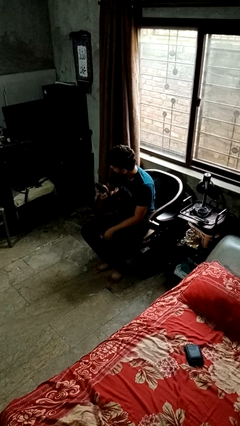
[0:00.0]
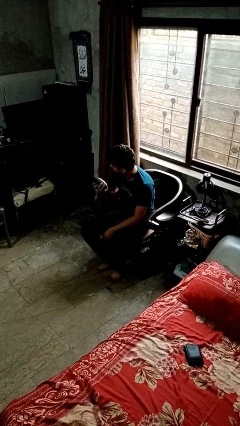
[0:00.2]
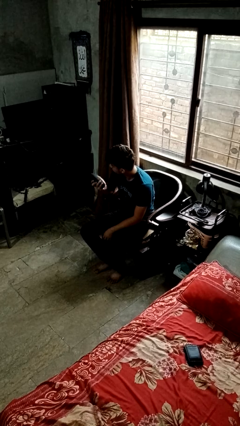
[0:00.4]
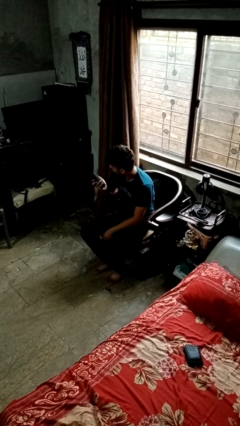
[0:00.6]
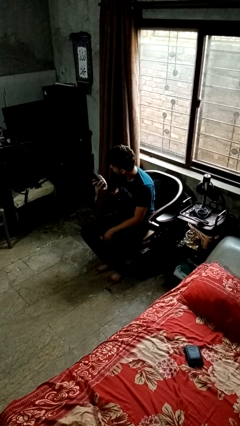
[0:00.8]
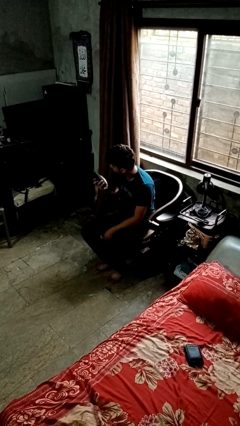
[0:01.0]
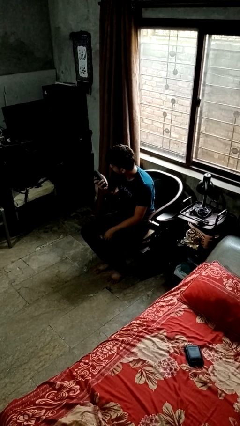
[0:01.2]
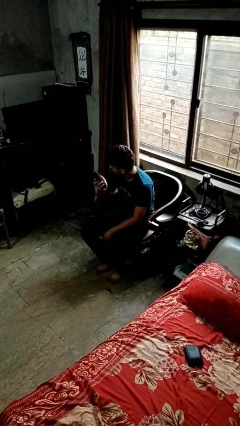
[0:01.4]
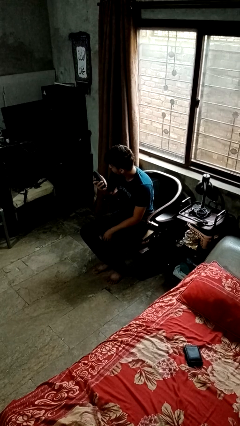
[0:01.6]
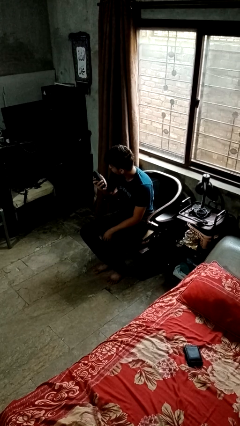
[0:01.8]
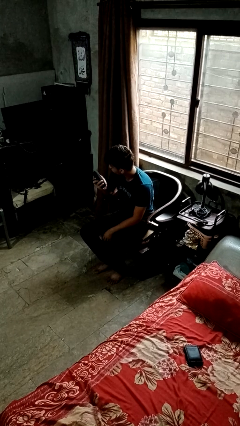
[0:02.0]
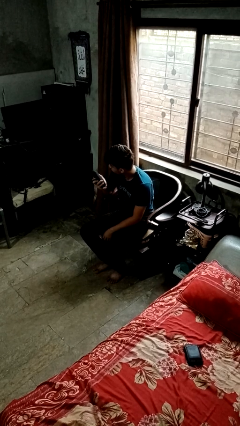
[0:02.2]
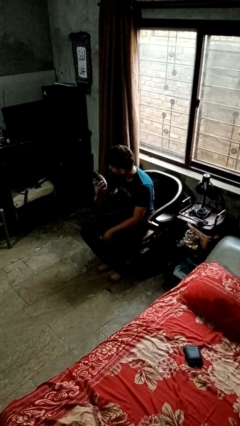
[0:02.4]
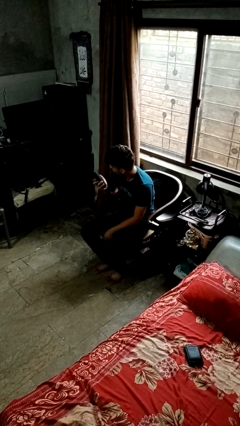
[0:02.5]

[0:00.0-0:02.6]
person uses television remote

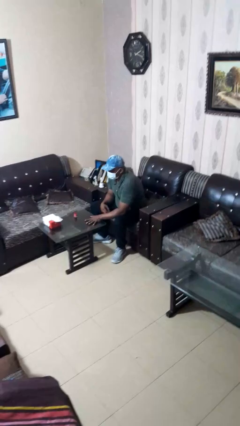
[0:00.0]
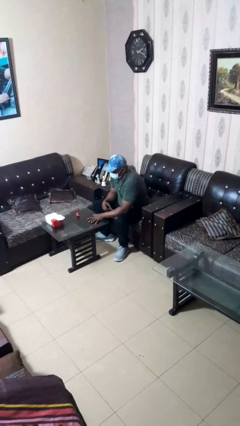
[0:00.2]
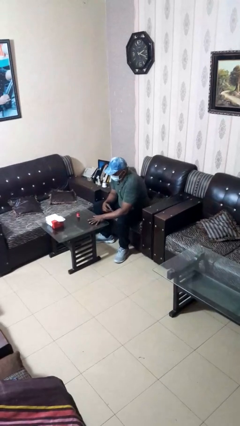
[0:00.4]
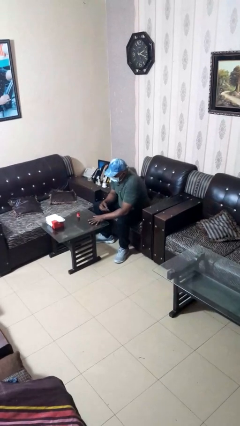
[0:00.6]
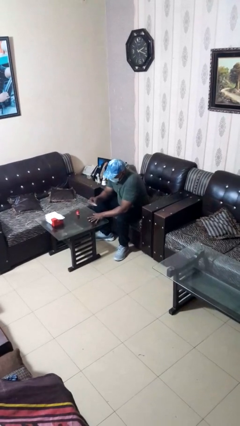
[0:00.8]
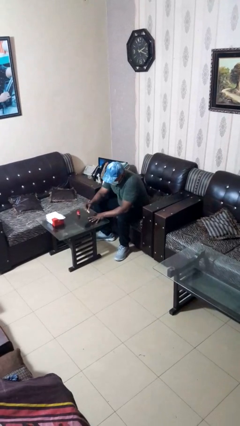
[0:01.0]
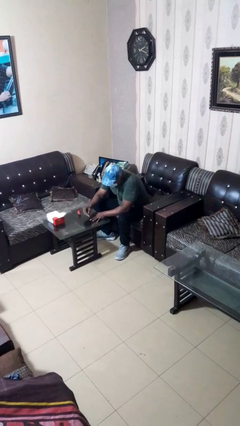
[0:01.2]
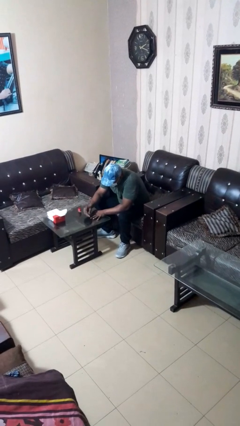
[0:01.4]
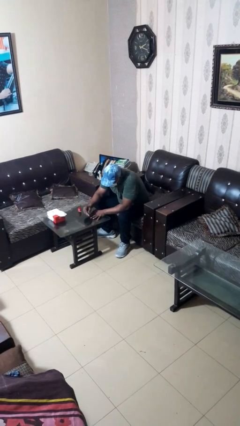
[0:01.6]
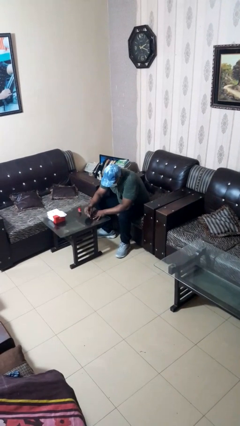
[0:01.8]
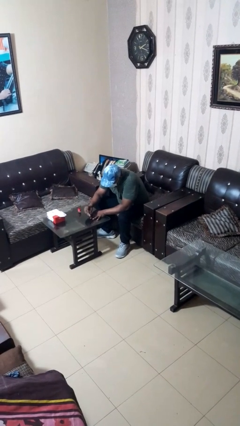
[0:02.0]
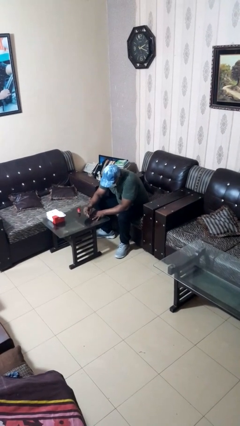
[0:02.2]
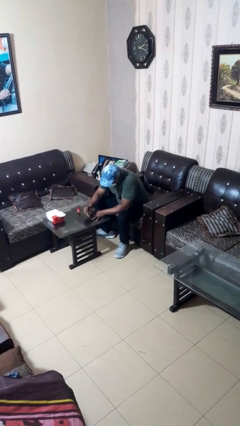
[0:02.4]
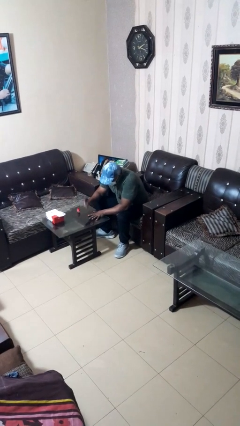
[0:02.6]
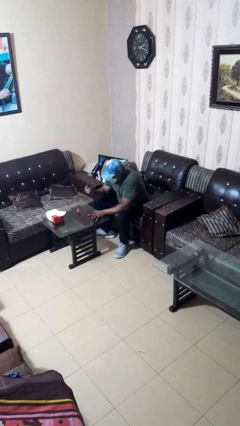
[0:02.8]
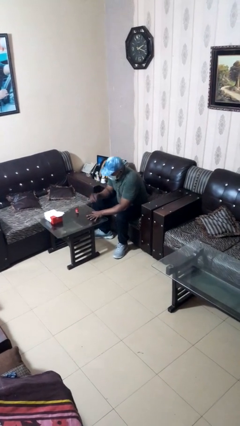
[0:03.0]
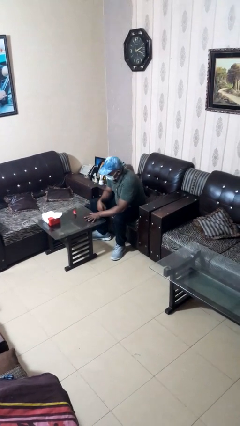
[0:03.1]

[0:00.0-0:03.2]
person paints fingernails

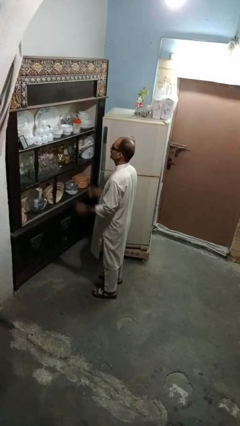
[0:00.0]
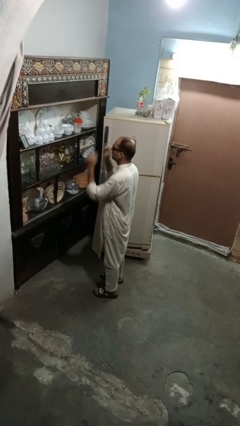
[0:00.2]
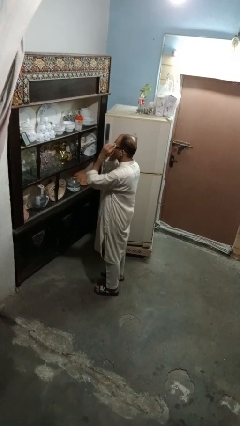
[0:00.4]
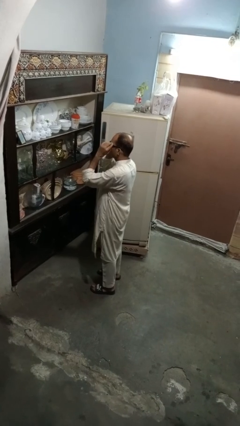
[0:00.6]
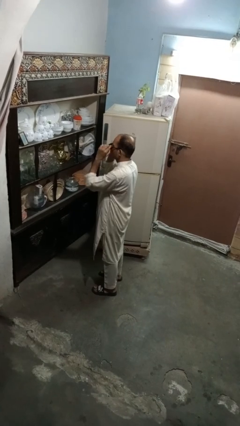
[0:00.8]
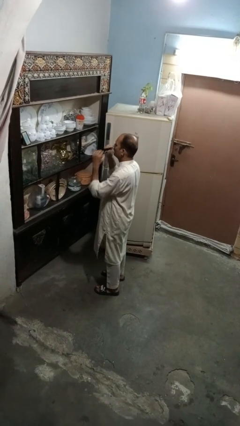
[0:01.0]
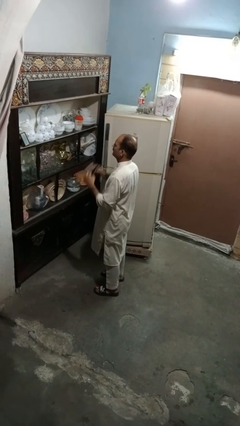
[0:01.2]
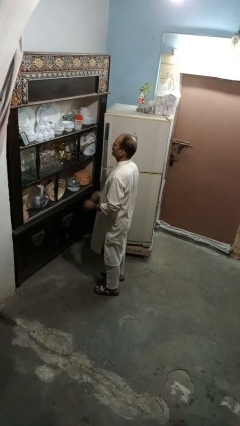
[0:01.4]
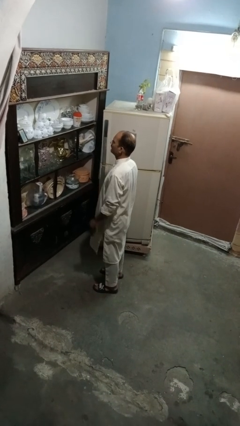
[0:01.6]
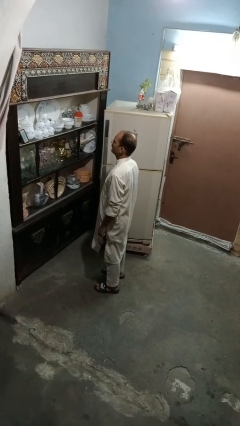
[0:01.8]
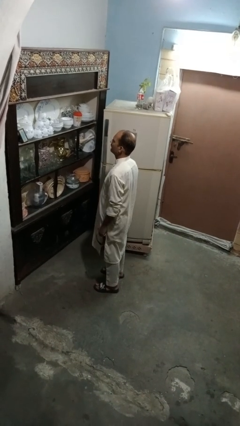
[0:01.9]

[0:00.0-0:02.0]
person takes off sunglasses

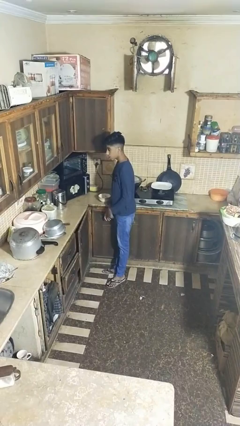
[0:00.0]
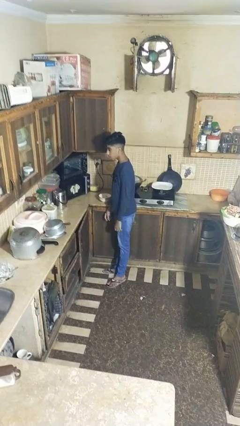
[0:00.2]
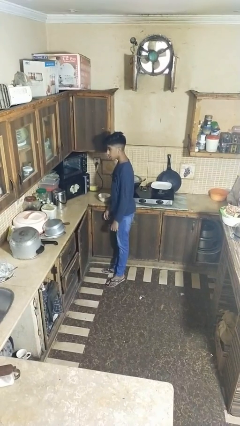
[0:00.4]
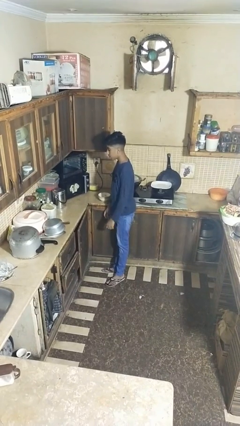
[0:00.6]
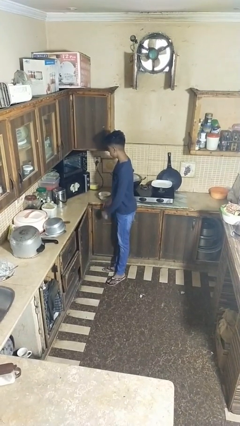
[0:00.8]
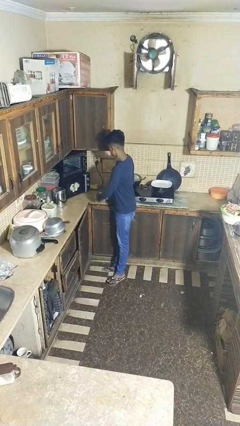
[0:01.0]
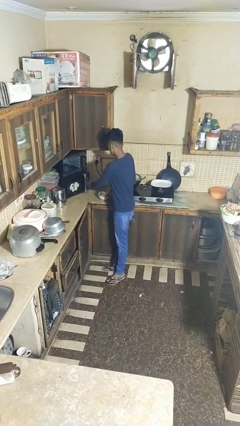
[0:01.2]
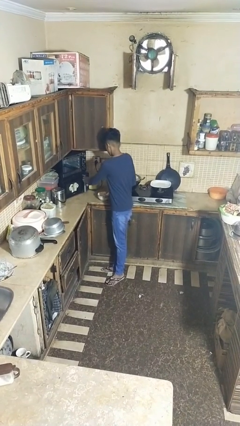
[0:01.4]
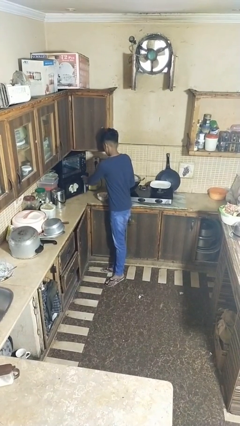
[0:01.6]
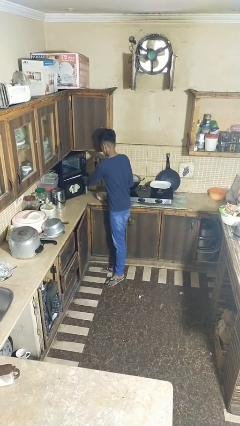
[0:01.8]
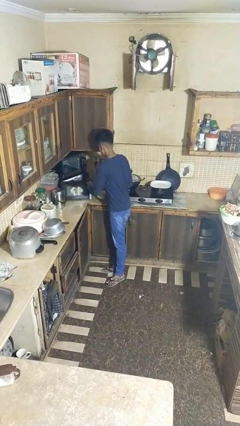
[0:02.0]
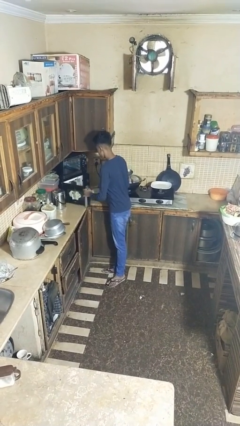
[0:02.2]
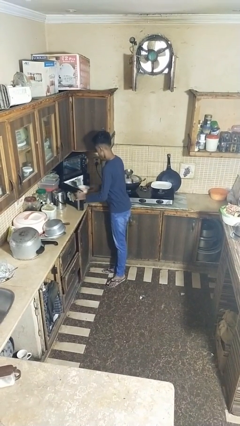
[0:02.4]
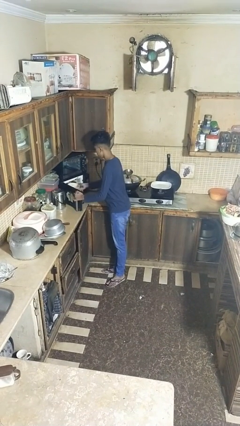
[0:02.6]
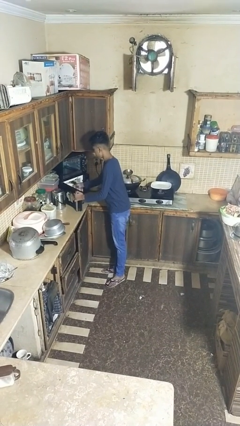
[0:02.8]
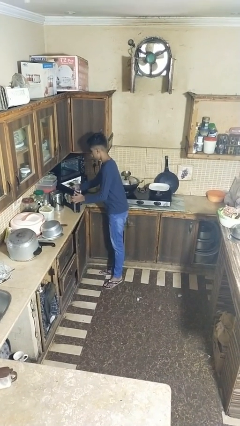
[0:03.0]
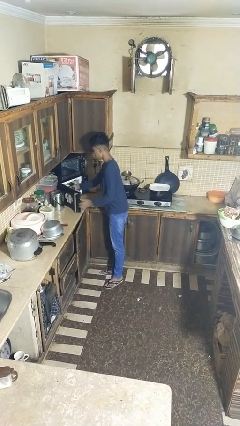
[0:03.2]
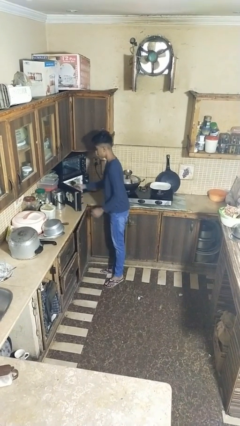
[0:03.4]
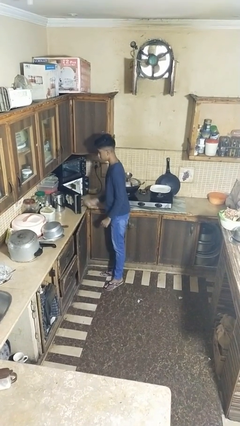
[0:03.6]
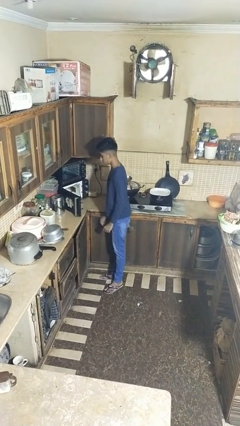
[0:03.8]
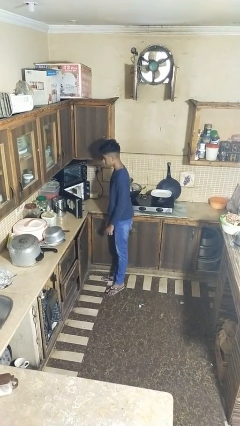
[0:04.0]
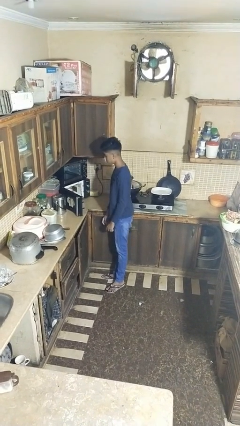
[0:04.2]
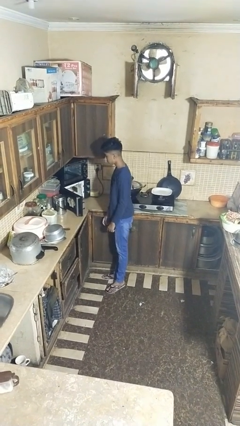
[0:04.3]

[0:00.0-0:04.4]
person puts object into microwave

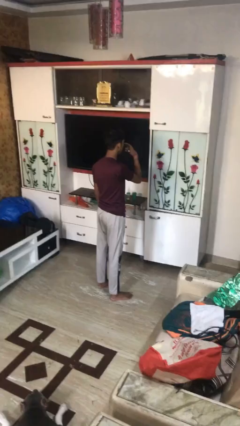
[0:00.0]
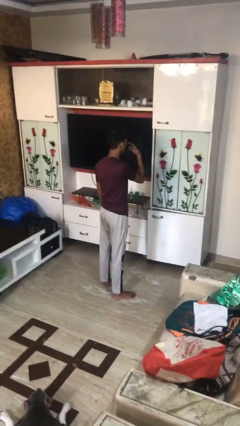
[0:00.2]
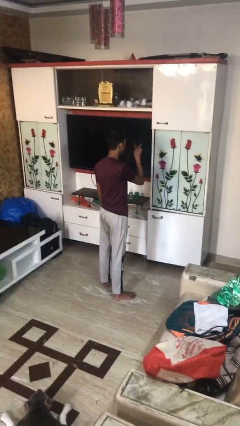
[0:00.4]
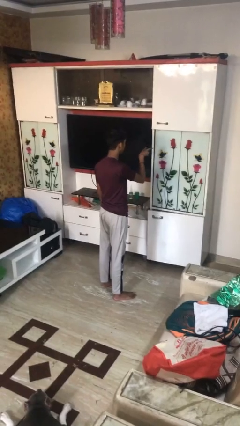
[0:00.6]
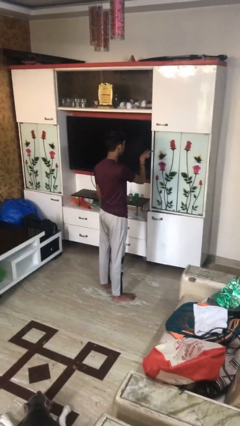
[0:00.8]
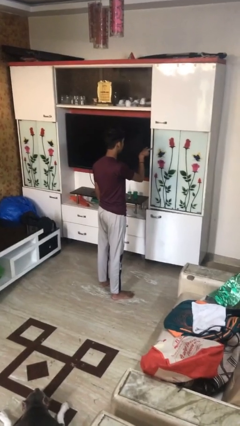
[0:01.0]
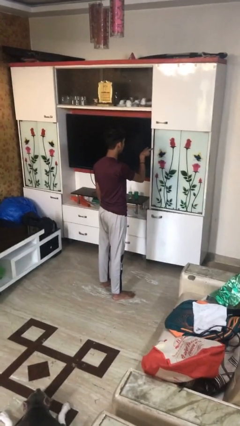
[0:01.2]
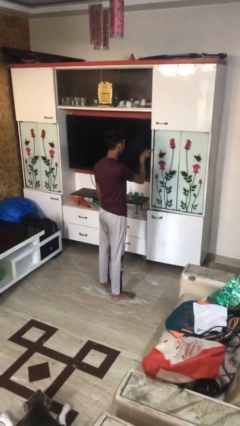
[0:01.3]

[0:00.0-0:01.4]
person gestures watch closely

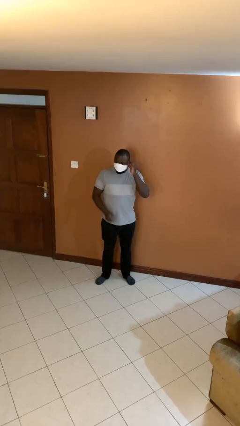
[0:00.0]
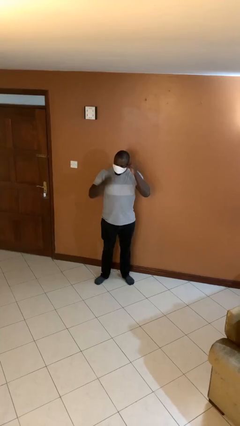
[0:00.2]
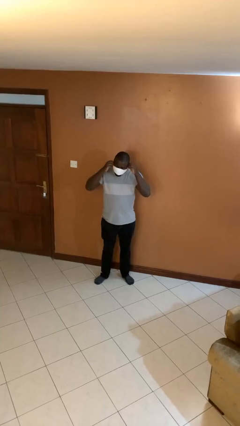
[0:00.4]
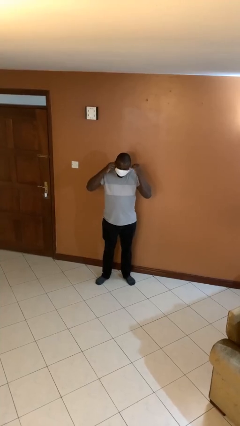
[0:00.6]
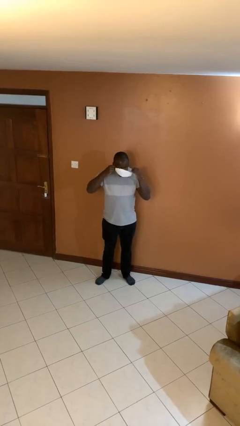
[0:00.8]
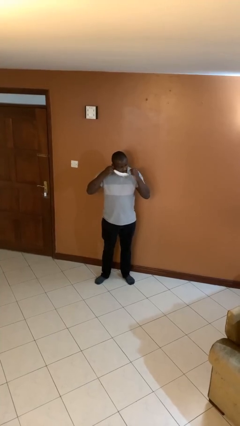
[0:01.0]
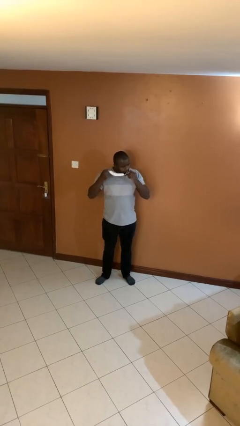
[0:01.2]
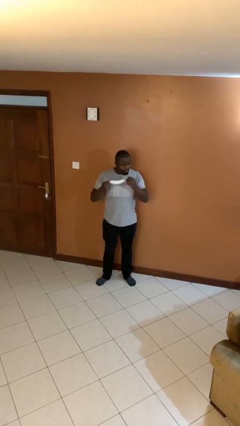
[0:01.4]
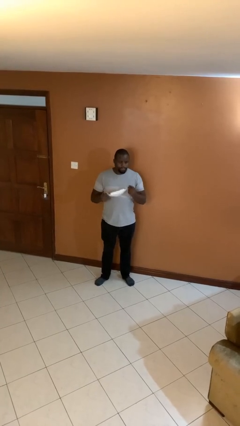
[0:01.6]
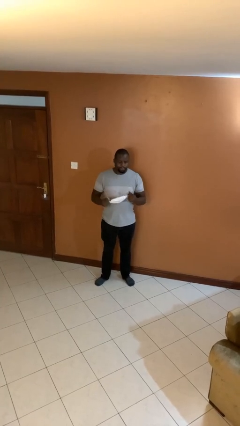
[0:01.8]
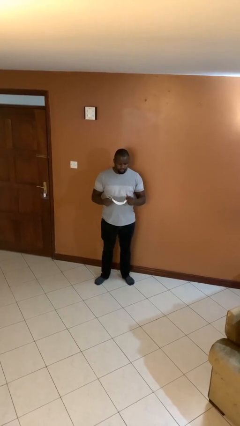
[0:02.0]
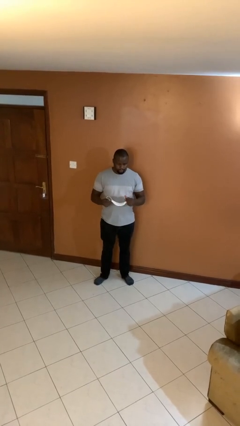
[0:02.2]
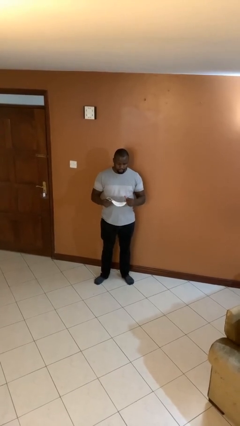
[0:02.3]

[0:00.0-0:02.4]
person takes off facemask

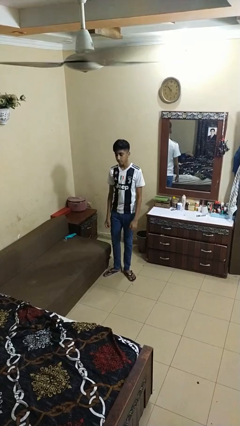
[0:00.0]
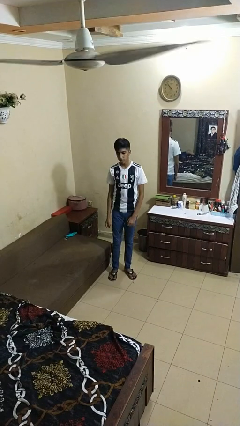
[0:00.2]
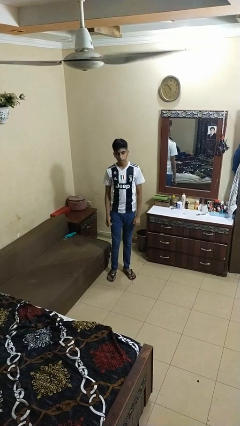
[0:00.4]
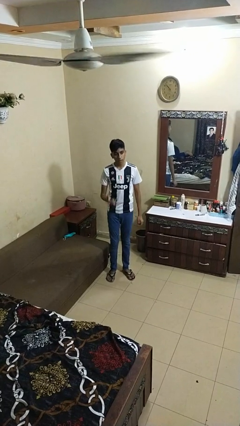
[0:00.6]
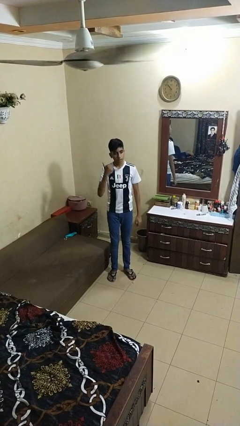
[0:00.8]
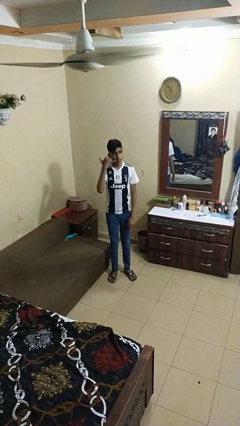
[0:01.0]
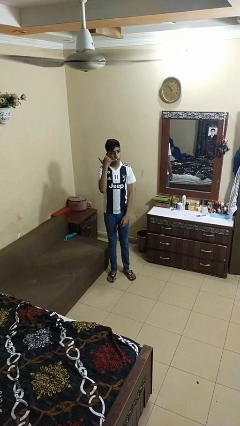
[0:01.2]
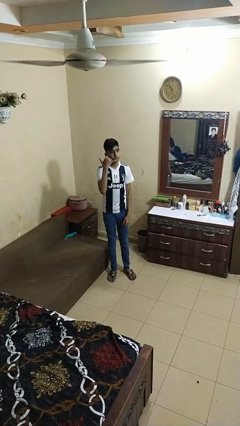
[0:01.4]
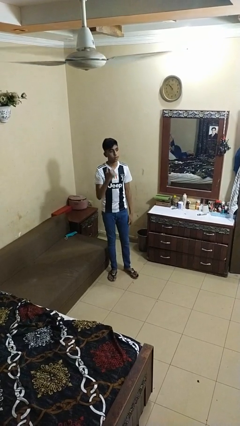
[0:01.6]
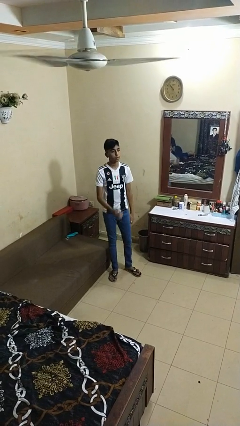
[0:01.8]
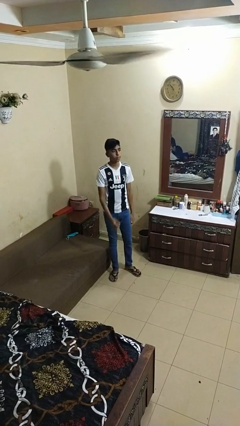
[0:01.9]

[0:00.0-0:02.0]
person gestures call me
